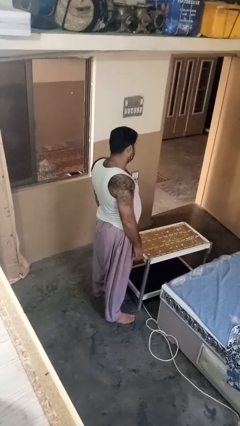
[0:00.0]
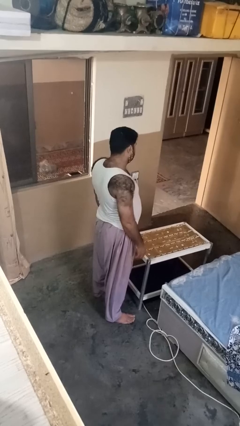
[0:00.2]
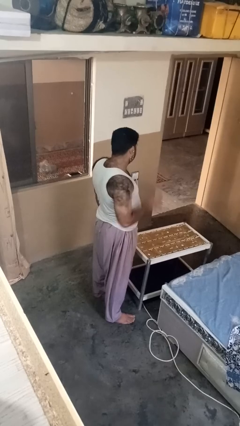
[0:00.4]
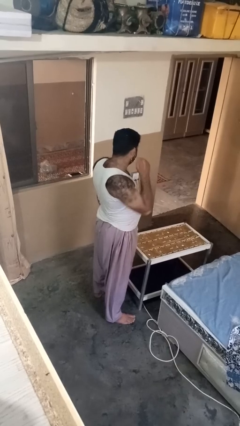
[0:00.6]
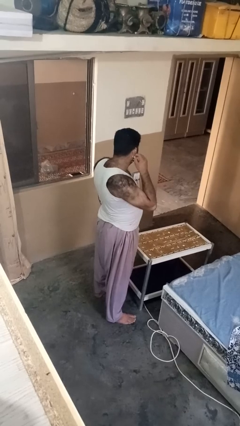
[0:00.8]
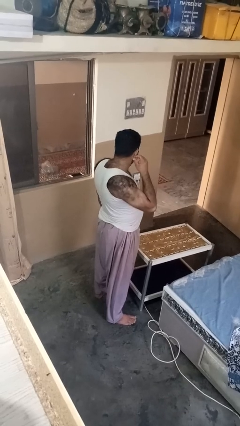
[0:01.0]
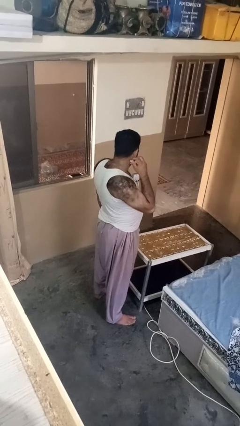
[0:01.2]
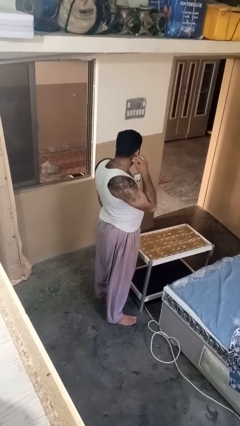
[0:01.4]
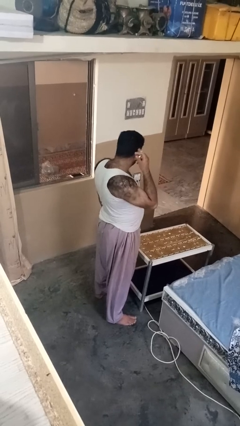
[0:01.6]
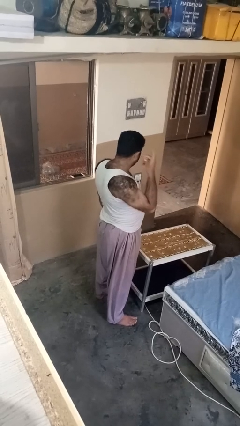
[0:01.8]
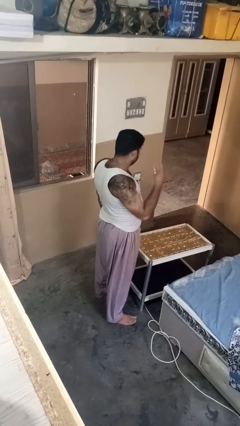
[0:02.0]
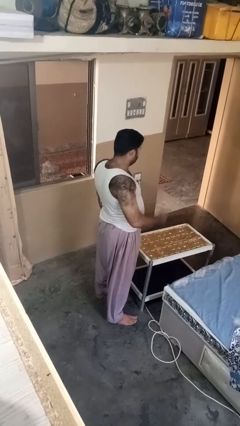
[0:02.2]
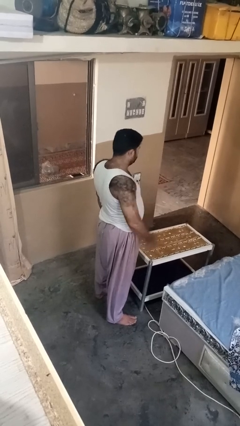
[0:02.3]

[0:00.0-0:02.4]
person takes off earrings

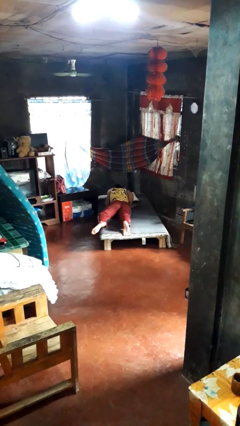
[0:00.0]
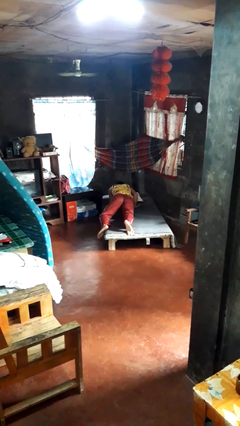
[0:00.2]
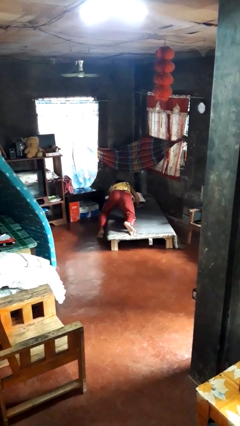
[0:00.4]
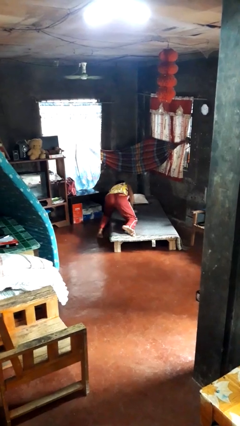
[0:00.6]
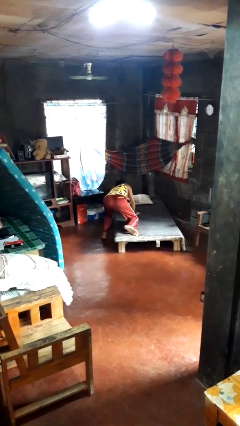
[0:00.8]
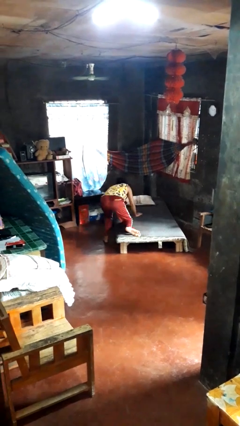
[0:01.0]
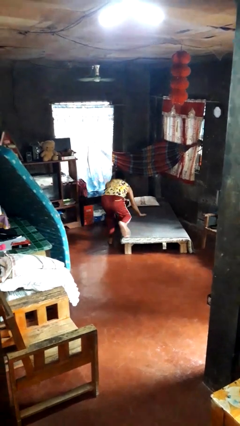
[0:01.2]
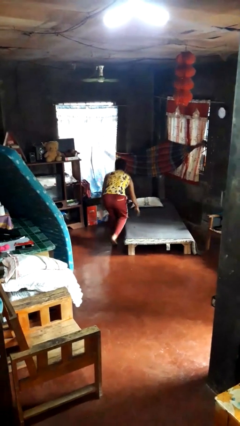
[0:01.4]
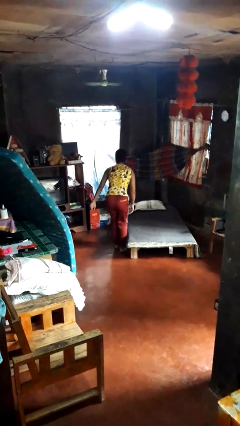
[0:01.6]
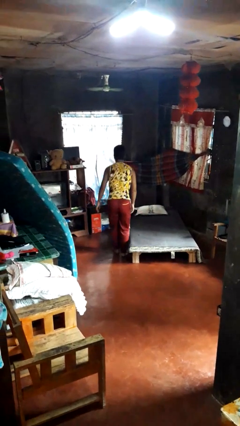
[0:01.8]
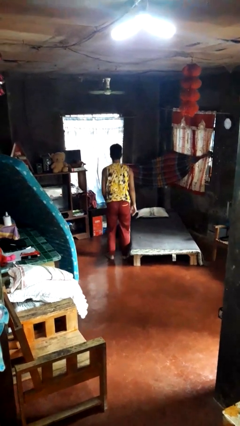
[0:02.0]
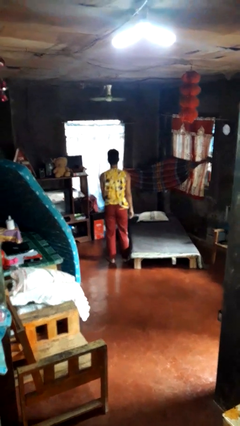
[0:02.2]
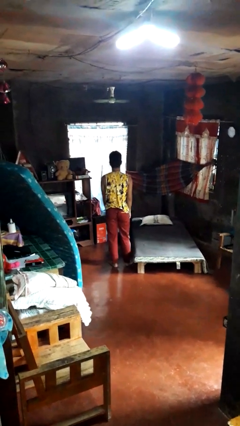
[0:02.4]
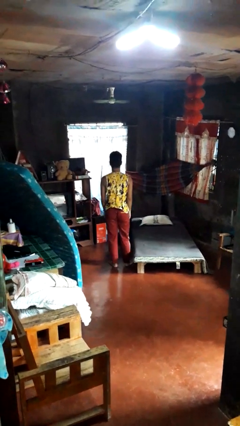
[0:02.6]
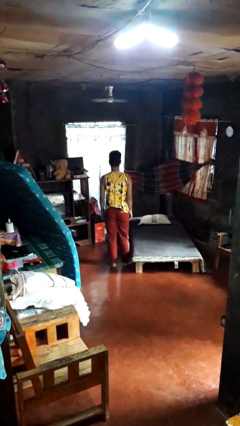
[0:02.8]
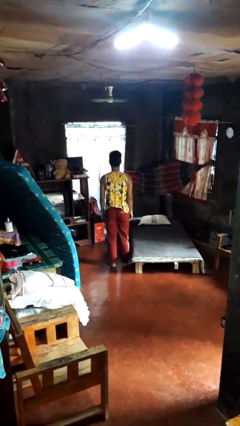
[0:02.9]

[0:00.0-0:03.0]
person stands up

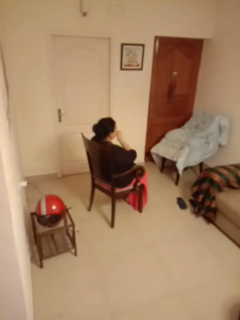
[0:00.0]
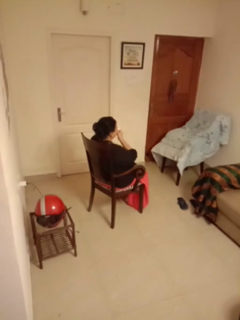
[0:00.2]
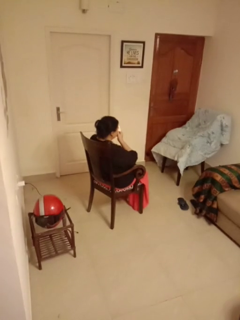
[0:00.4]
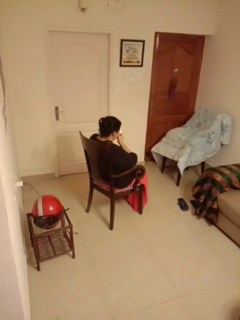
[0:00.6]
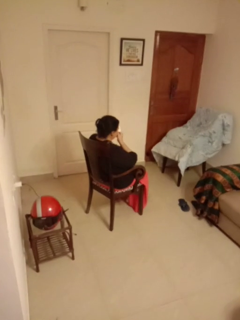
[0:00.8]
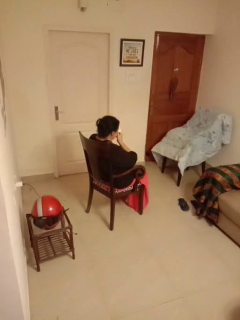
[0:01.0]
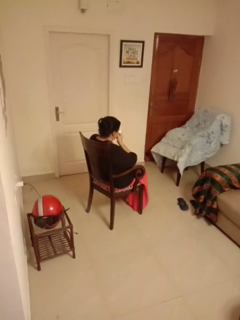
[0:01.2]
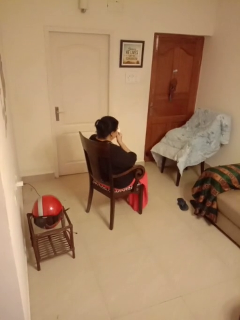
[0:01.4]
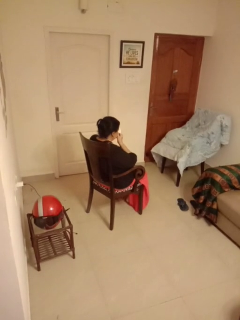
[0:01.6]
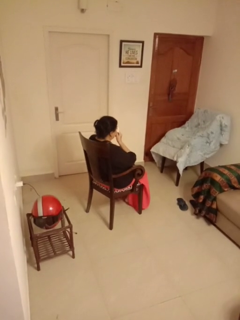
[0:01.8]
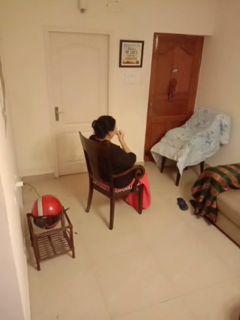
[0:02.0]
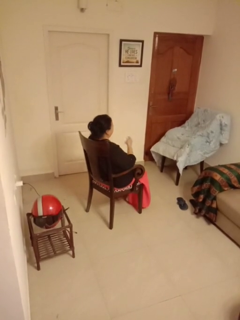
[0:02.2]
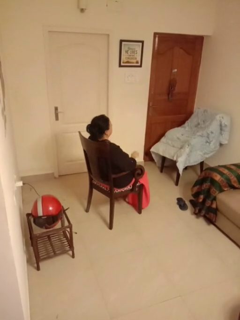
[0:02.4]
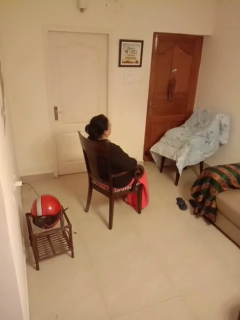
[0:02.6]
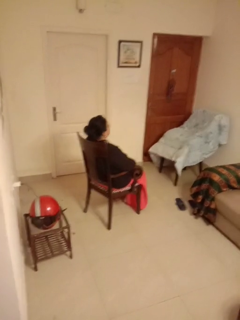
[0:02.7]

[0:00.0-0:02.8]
person blows nose

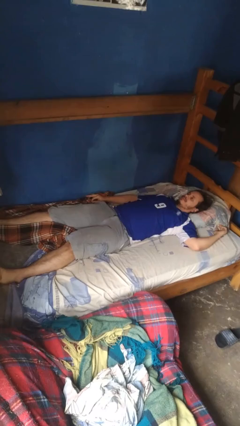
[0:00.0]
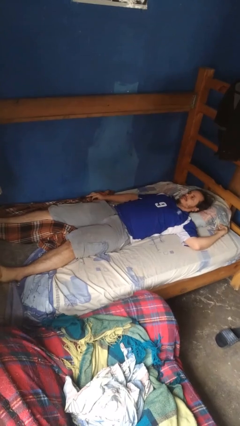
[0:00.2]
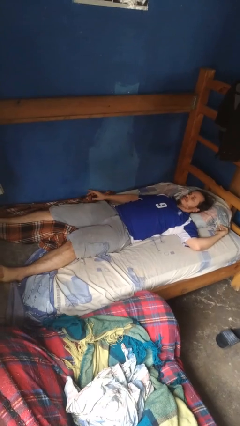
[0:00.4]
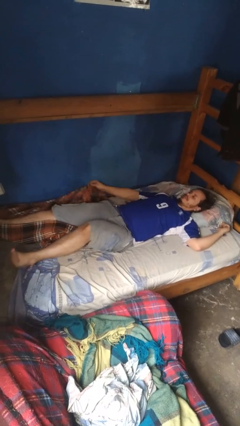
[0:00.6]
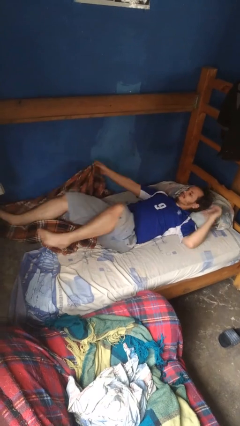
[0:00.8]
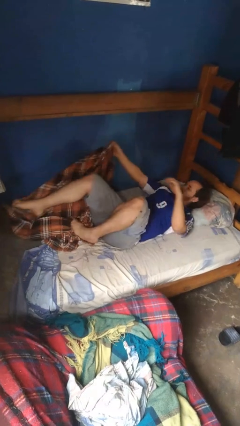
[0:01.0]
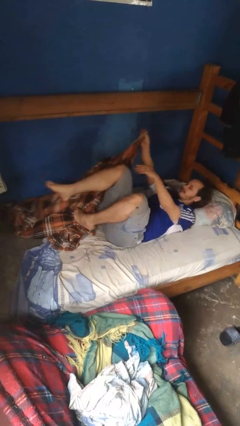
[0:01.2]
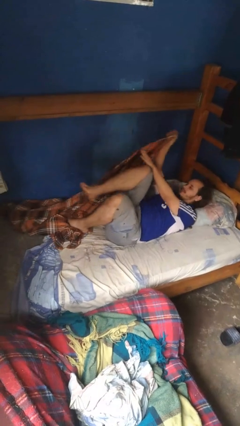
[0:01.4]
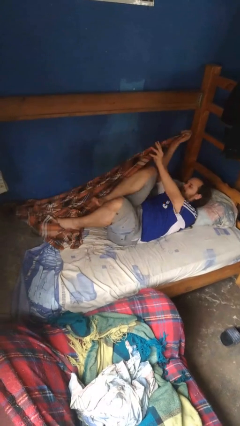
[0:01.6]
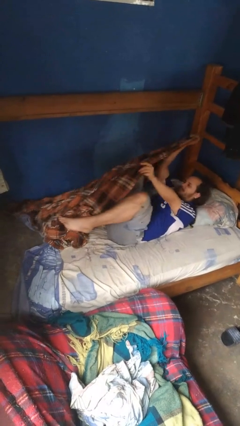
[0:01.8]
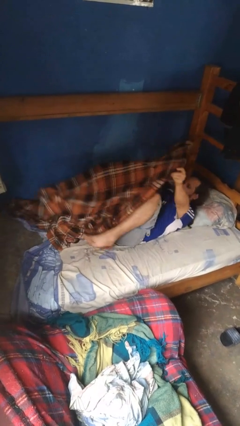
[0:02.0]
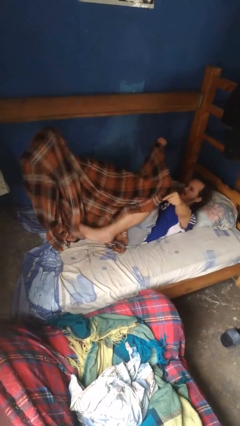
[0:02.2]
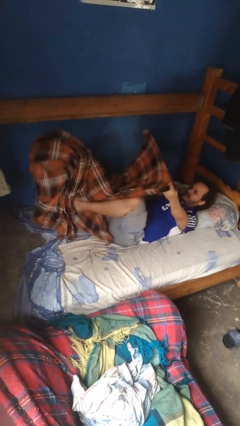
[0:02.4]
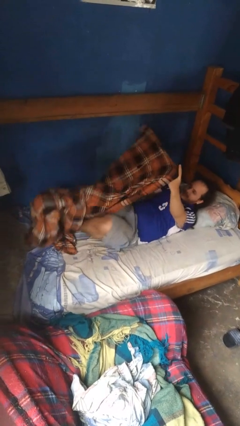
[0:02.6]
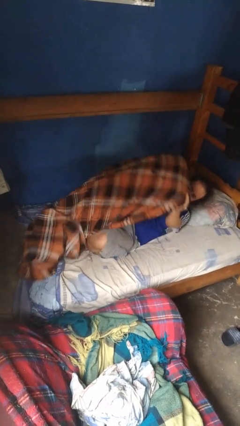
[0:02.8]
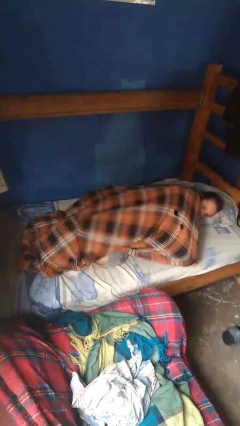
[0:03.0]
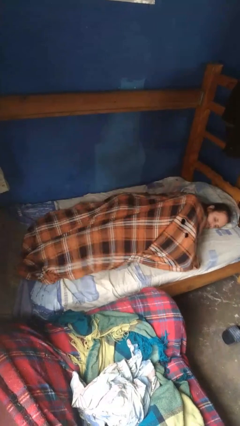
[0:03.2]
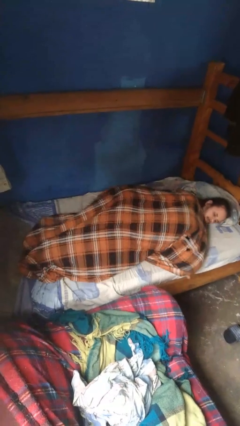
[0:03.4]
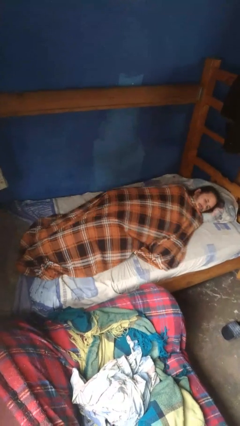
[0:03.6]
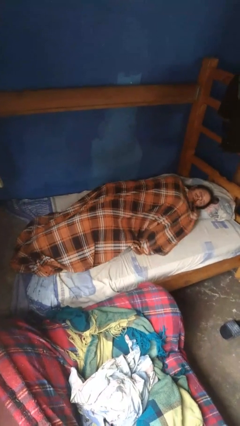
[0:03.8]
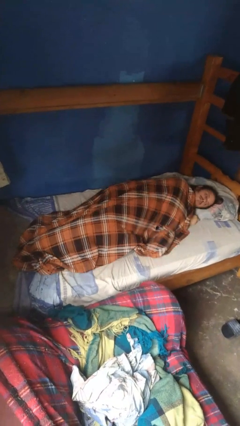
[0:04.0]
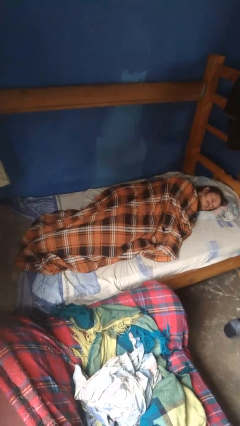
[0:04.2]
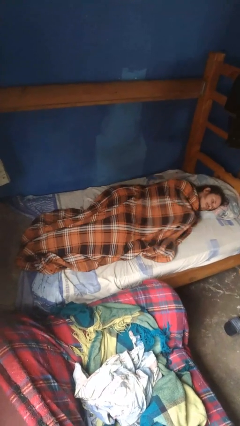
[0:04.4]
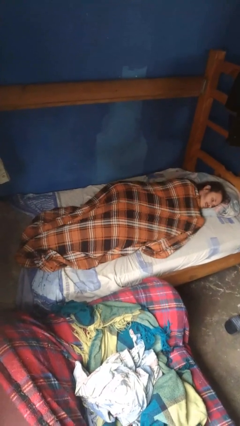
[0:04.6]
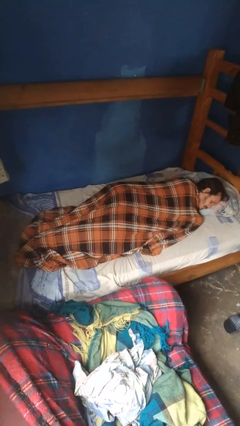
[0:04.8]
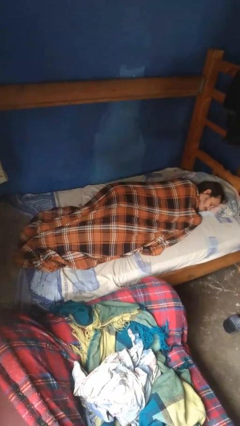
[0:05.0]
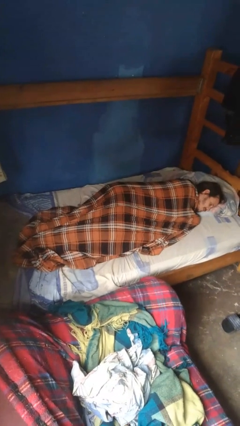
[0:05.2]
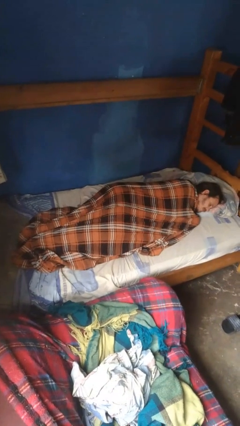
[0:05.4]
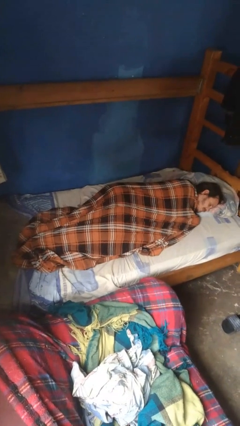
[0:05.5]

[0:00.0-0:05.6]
person covers with bedsheets

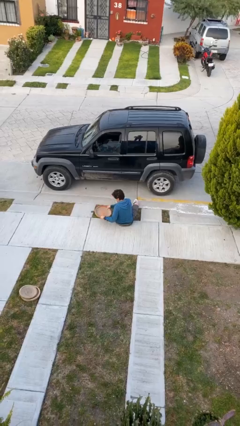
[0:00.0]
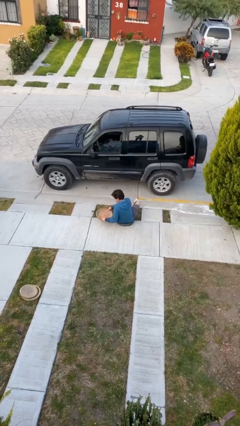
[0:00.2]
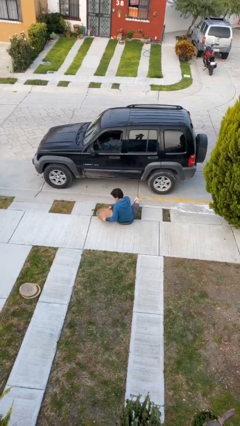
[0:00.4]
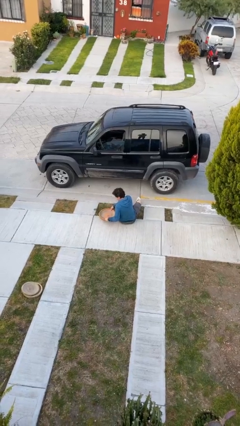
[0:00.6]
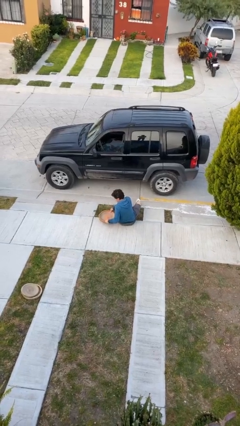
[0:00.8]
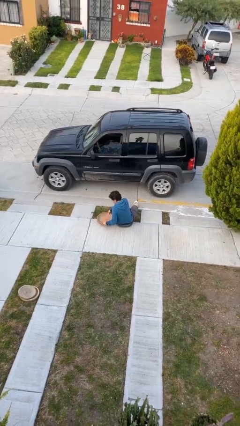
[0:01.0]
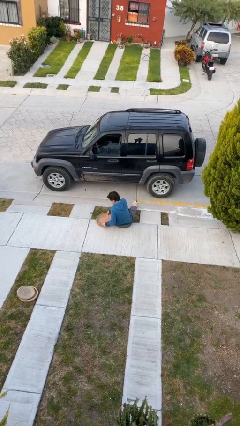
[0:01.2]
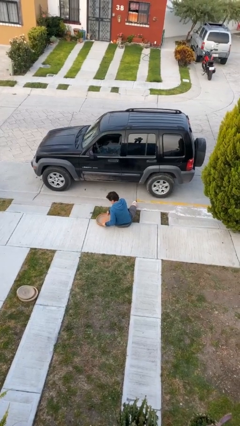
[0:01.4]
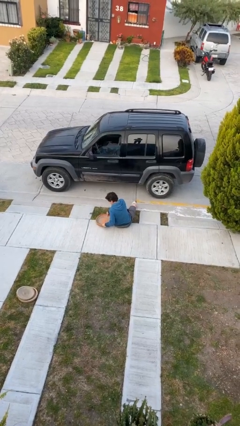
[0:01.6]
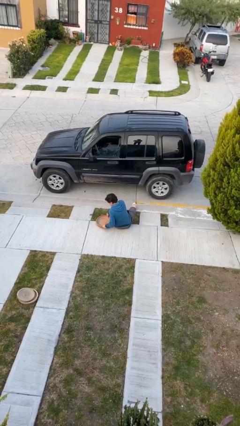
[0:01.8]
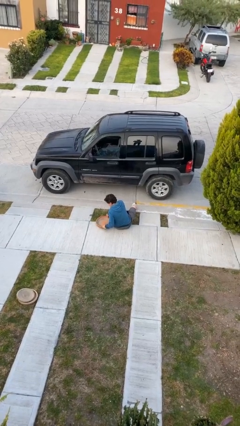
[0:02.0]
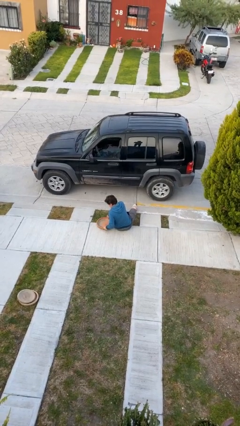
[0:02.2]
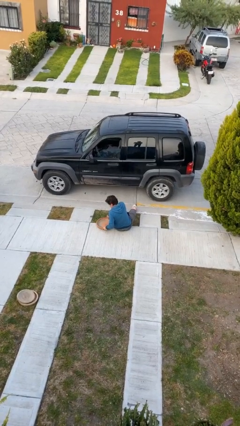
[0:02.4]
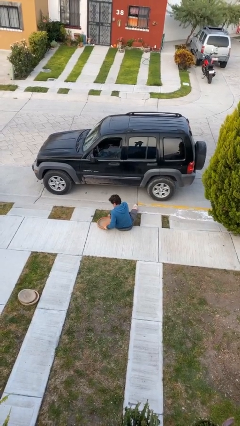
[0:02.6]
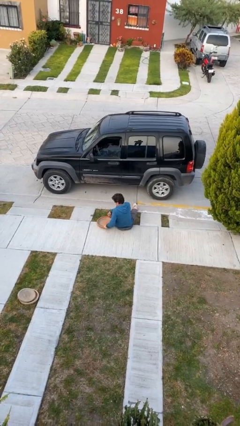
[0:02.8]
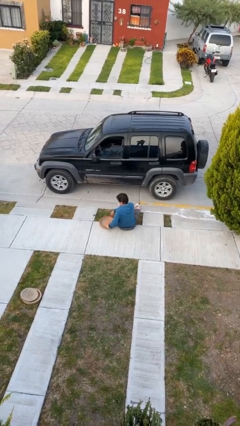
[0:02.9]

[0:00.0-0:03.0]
person puts down object on floor

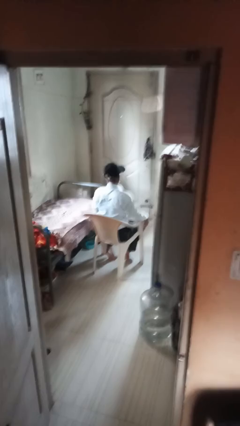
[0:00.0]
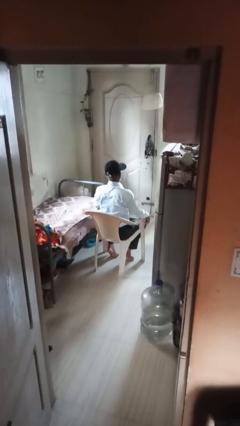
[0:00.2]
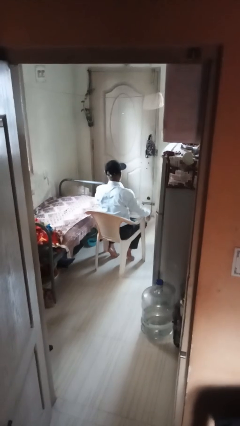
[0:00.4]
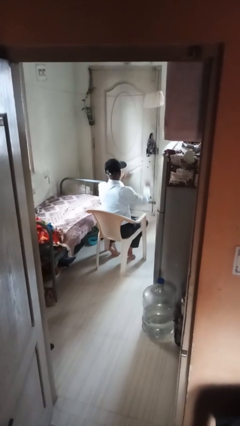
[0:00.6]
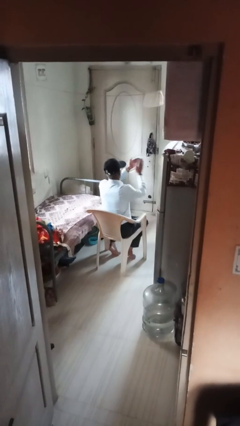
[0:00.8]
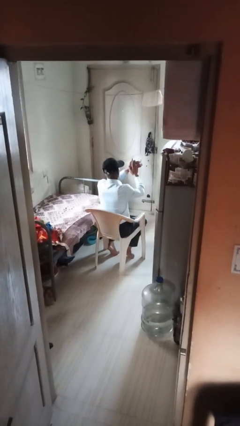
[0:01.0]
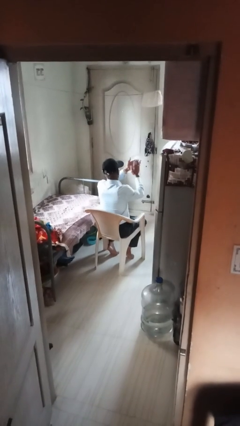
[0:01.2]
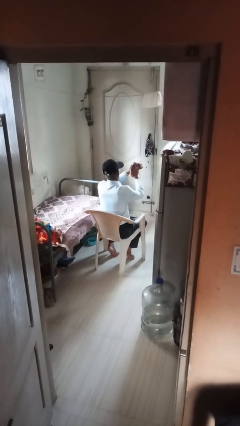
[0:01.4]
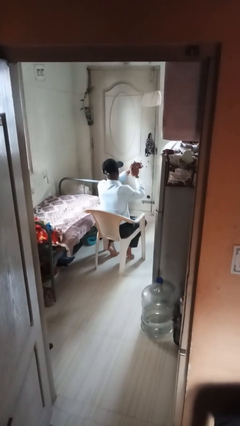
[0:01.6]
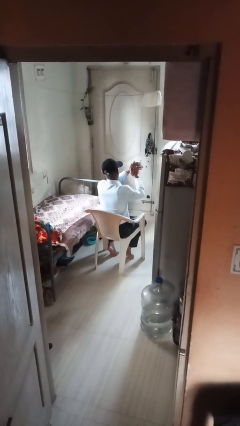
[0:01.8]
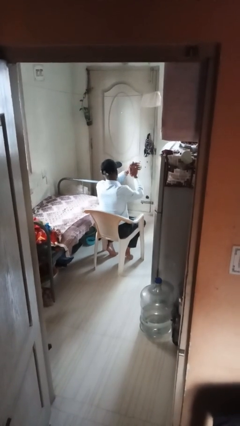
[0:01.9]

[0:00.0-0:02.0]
person claps hands
